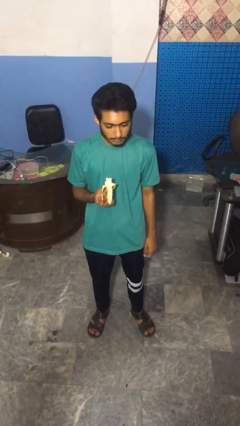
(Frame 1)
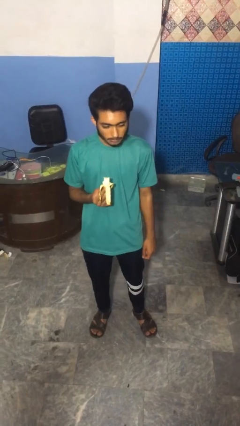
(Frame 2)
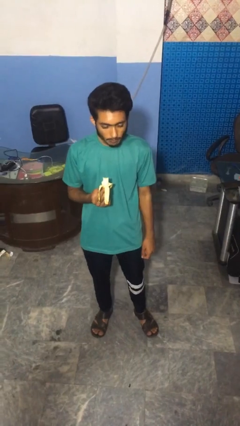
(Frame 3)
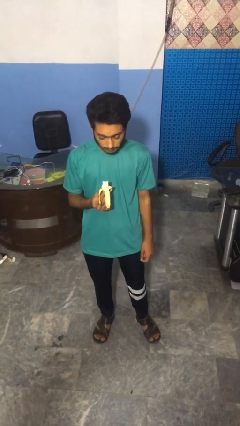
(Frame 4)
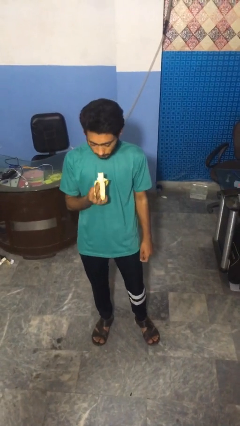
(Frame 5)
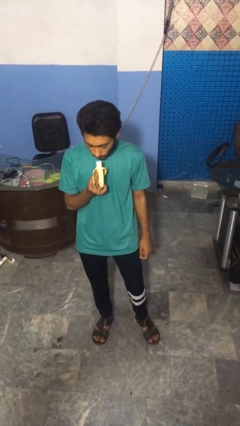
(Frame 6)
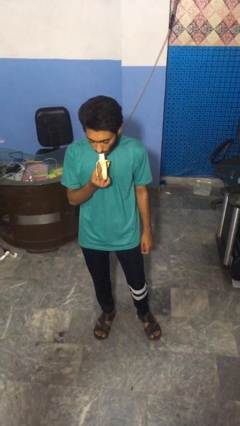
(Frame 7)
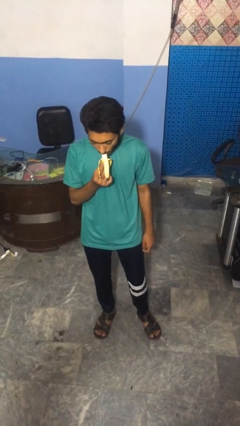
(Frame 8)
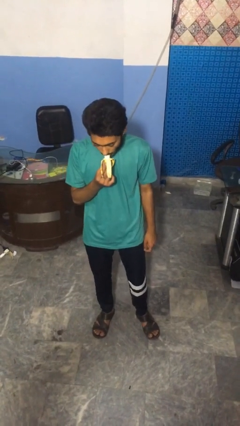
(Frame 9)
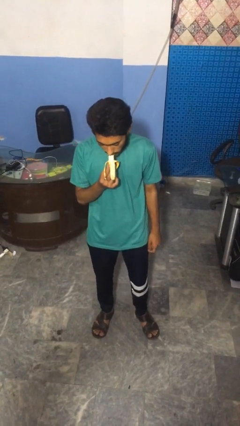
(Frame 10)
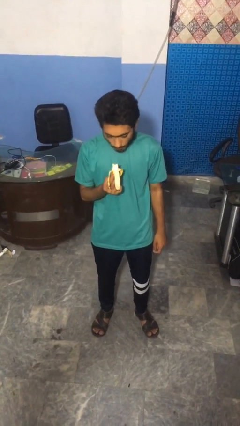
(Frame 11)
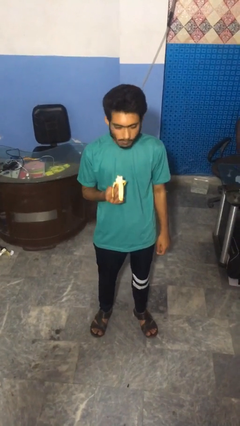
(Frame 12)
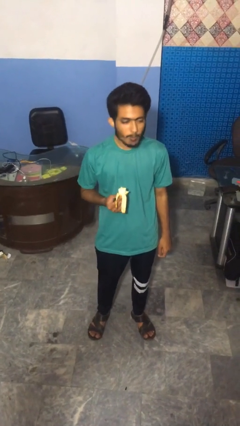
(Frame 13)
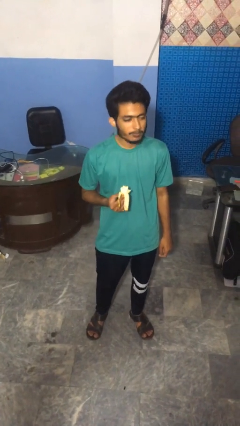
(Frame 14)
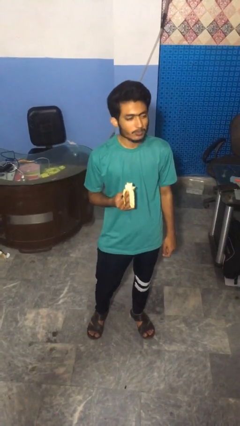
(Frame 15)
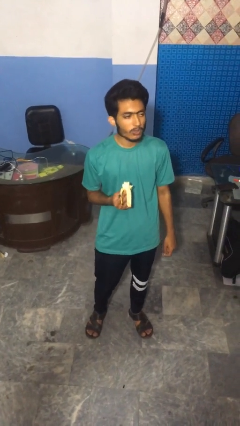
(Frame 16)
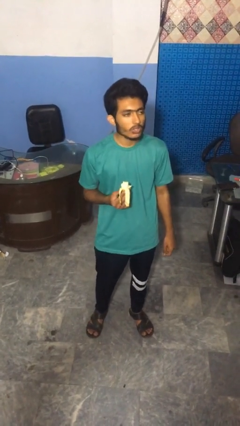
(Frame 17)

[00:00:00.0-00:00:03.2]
person eats banana

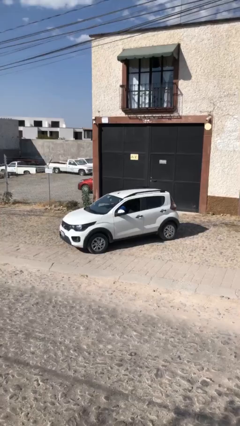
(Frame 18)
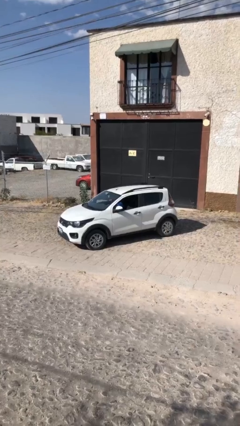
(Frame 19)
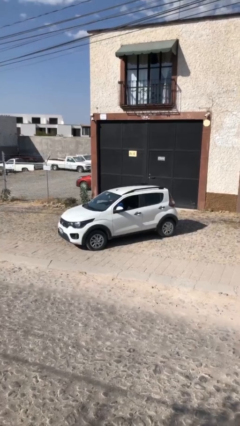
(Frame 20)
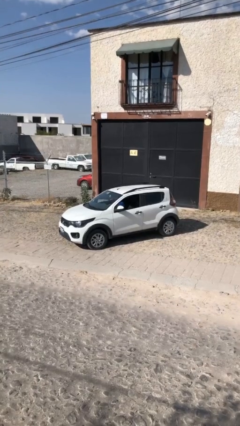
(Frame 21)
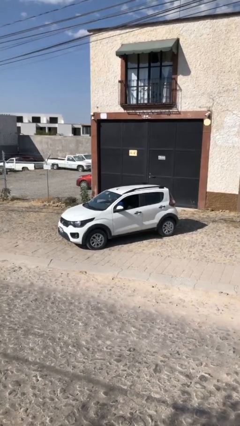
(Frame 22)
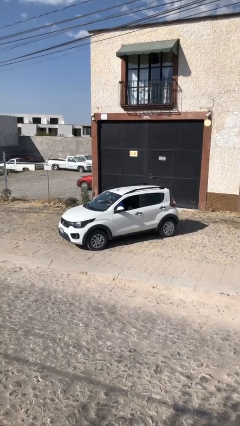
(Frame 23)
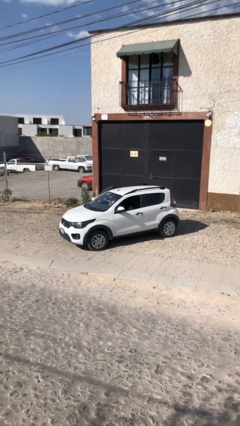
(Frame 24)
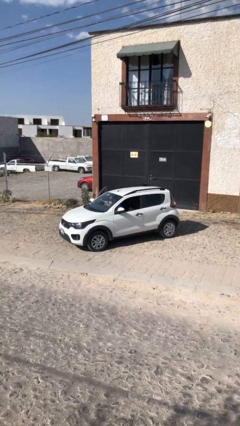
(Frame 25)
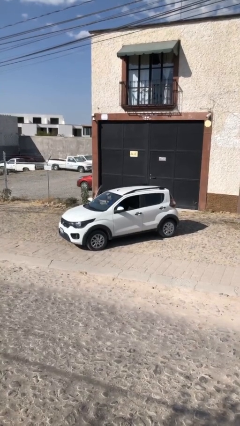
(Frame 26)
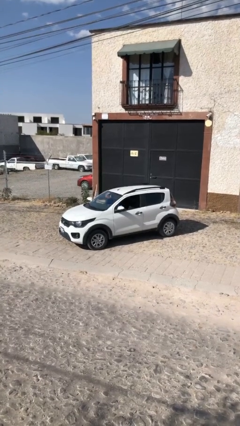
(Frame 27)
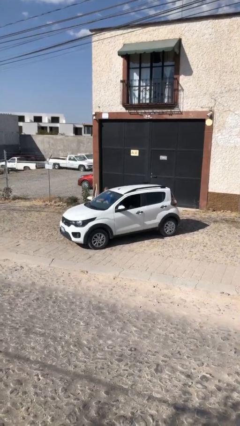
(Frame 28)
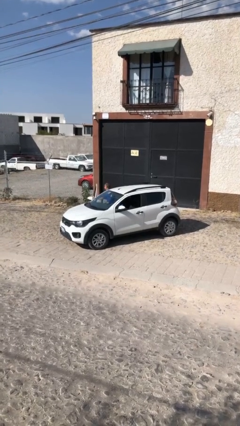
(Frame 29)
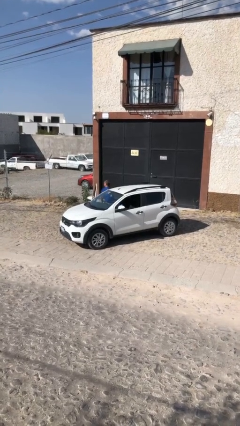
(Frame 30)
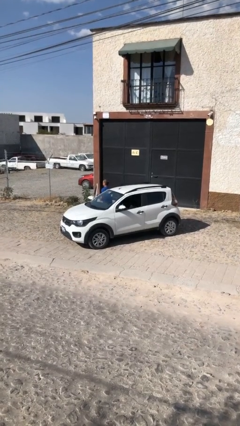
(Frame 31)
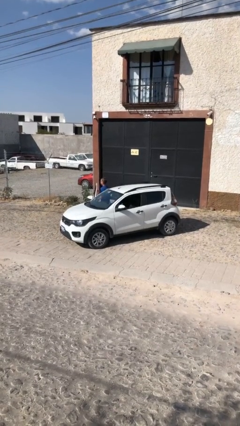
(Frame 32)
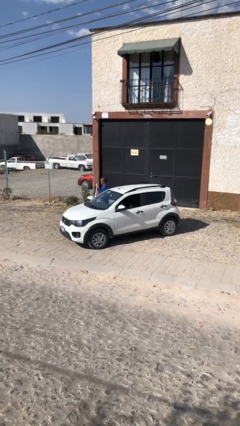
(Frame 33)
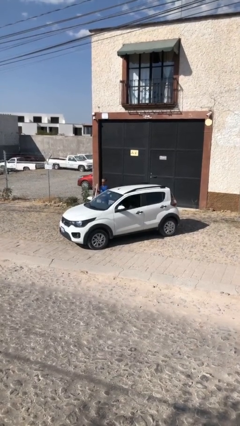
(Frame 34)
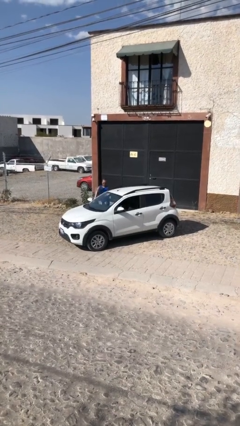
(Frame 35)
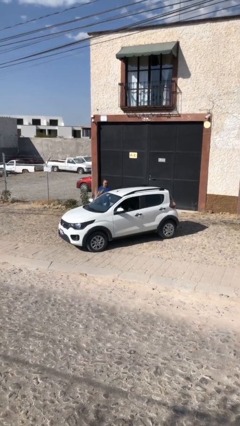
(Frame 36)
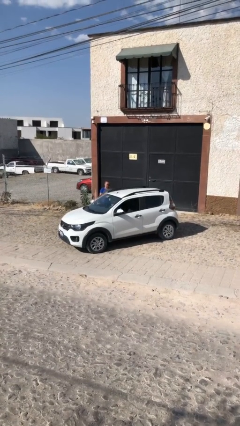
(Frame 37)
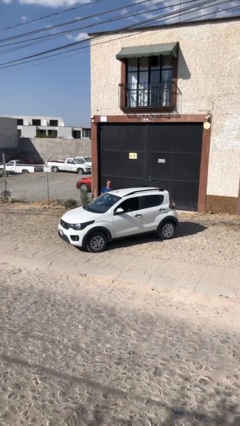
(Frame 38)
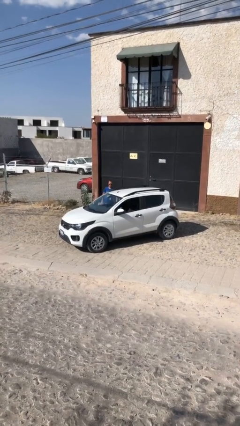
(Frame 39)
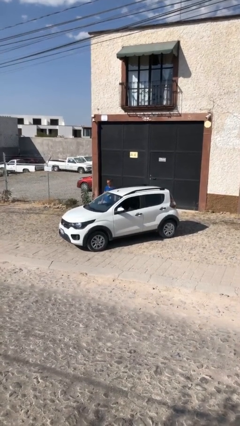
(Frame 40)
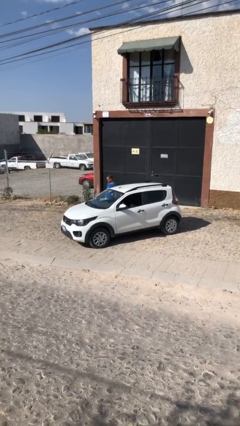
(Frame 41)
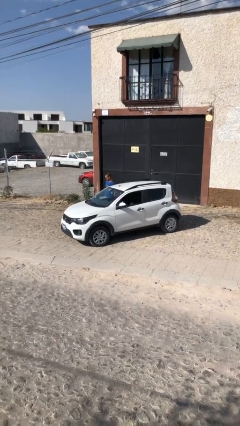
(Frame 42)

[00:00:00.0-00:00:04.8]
car drops off person

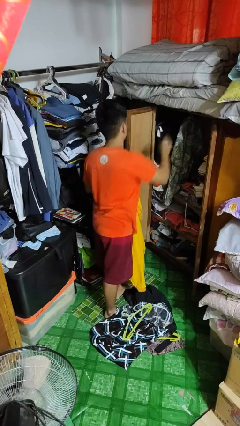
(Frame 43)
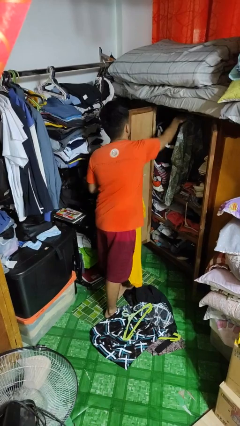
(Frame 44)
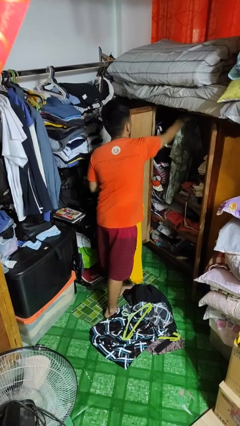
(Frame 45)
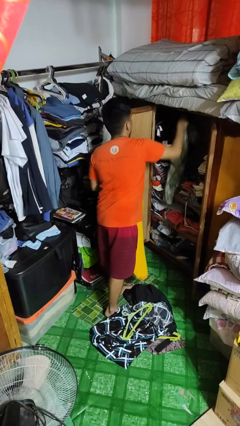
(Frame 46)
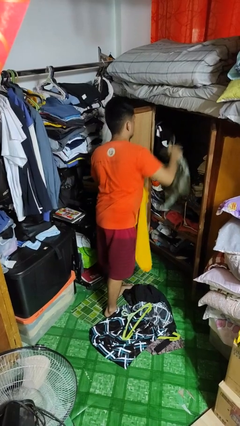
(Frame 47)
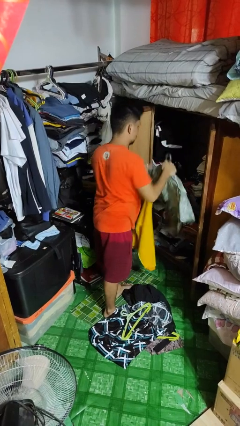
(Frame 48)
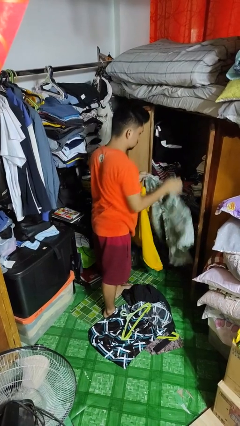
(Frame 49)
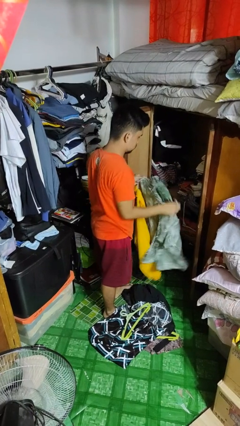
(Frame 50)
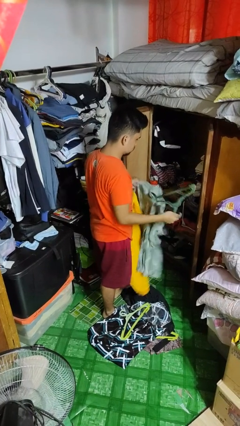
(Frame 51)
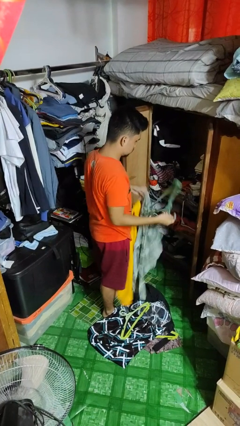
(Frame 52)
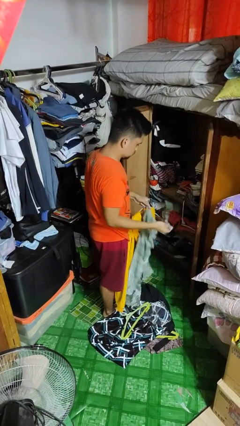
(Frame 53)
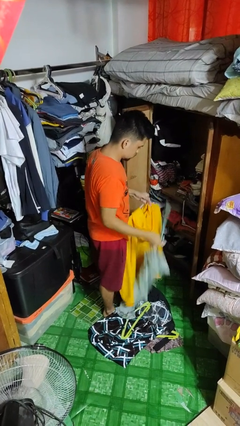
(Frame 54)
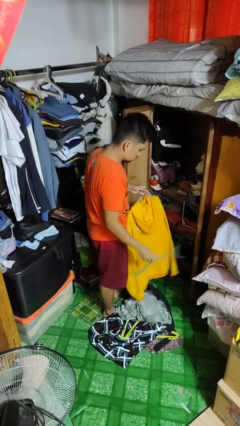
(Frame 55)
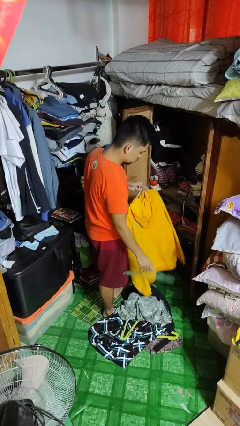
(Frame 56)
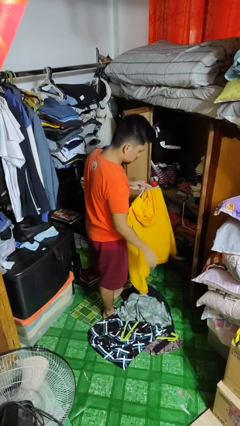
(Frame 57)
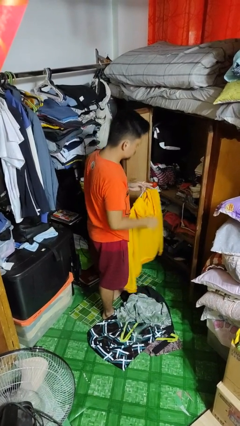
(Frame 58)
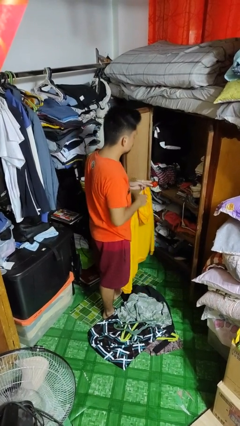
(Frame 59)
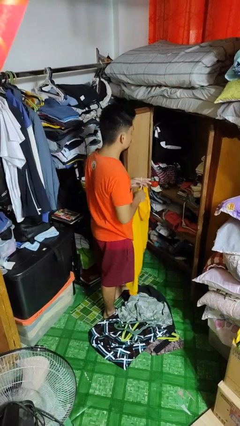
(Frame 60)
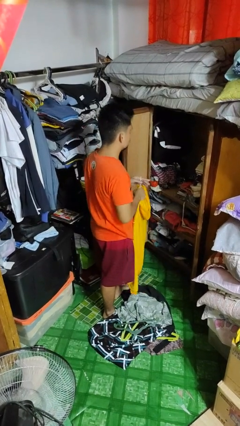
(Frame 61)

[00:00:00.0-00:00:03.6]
person takes clothes from closet

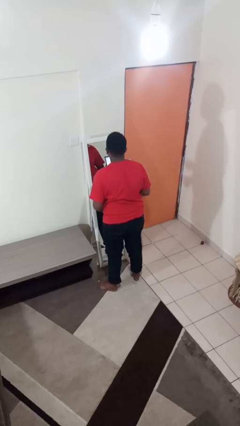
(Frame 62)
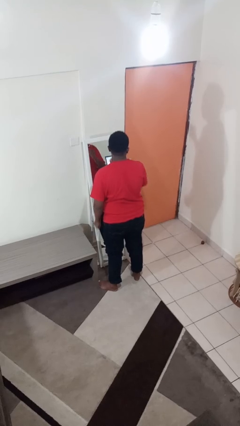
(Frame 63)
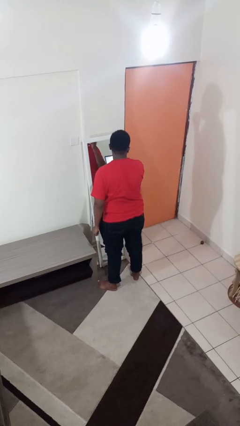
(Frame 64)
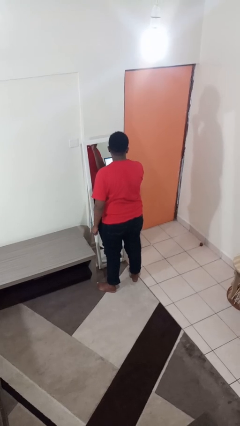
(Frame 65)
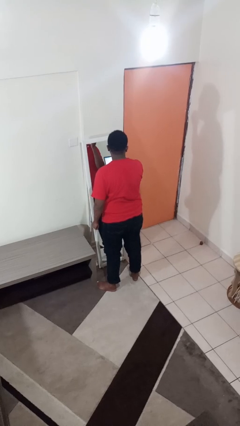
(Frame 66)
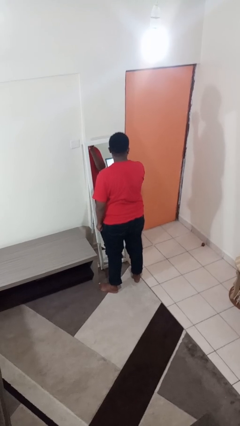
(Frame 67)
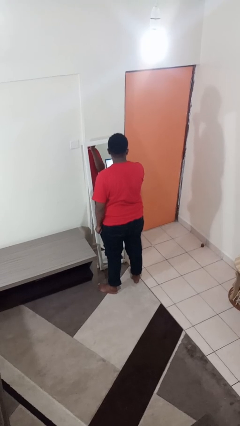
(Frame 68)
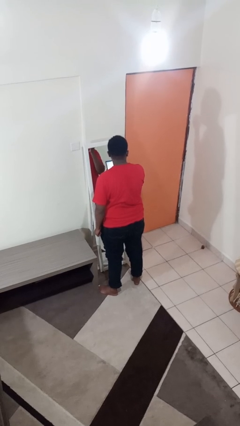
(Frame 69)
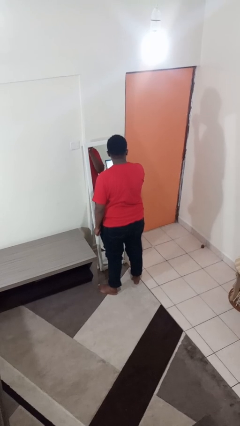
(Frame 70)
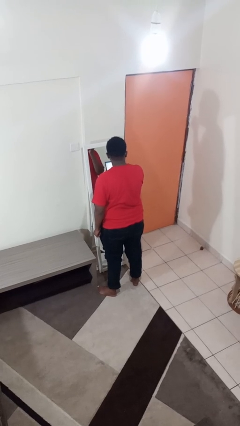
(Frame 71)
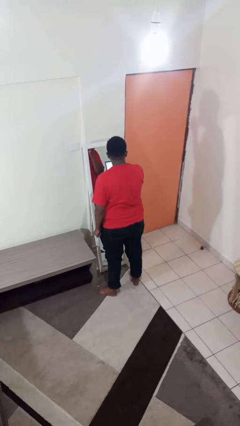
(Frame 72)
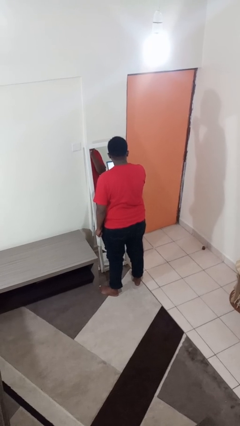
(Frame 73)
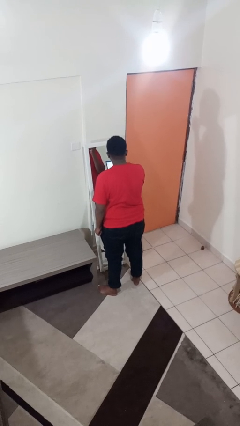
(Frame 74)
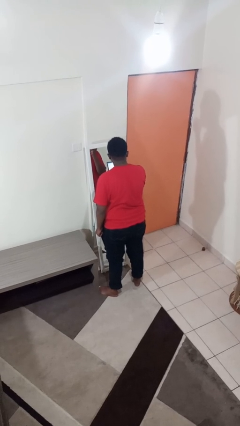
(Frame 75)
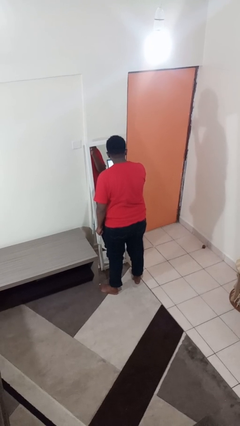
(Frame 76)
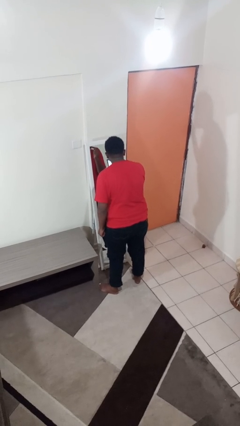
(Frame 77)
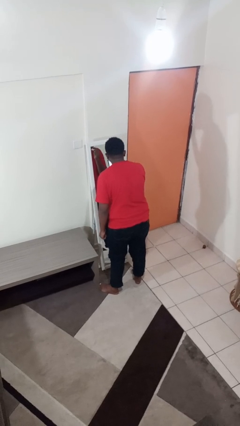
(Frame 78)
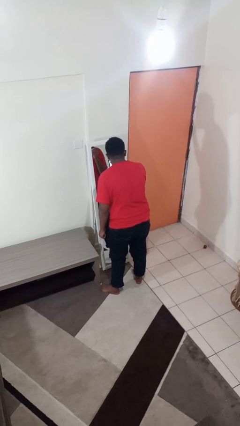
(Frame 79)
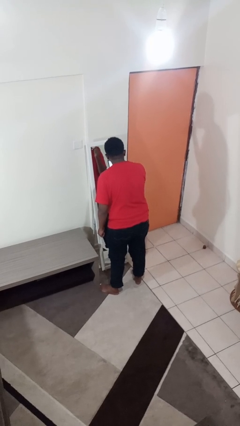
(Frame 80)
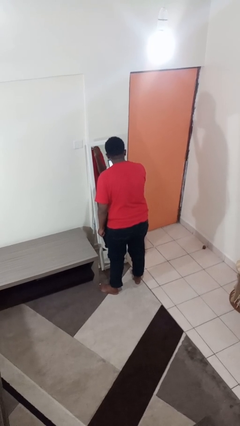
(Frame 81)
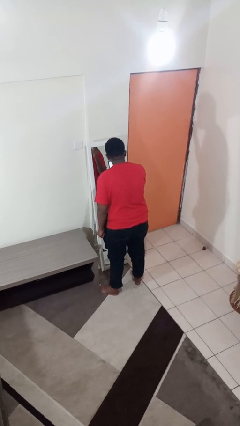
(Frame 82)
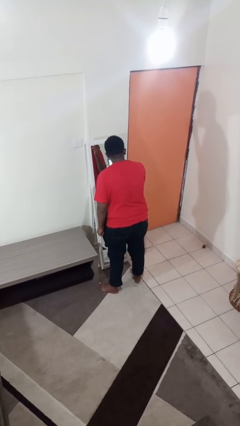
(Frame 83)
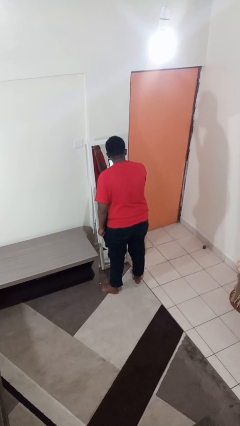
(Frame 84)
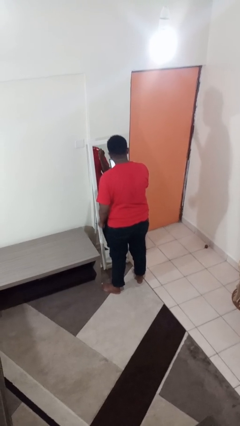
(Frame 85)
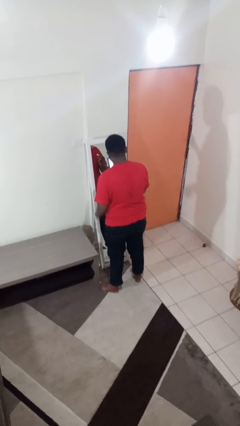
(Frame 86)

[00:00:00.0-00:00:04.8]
person applies lip makeup

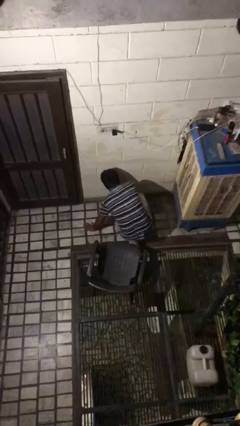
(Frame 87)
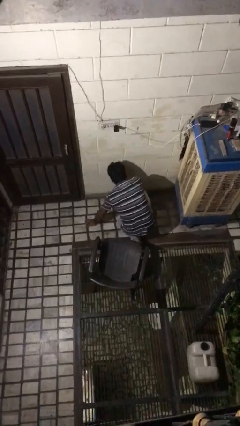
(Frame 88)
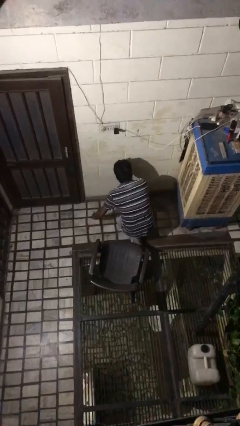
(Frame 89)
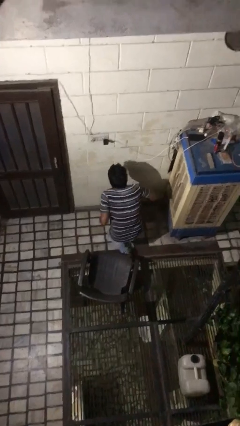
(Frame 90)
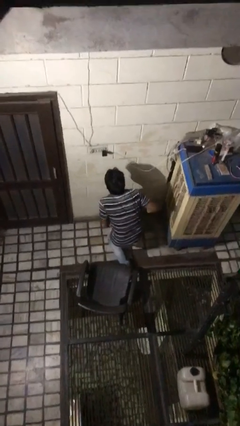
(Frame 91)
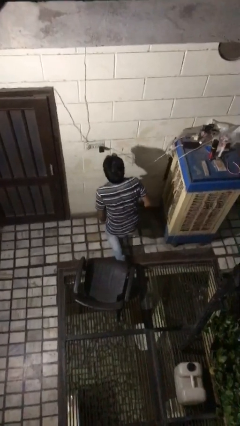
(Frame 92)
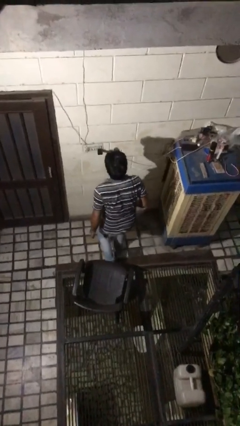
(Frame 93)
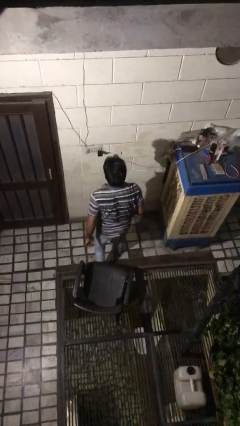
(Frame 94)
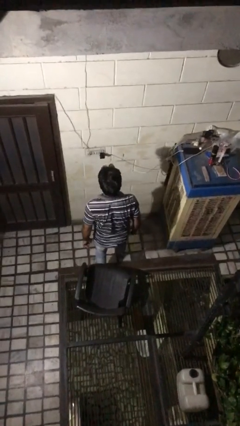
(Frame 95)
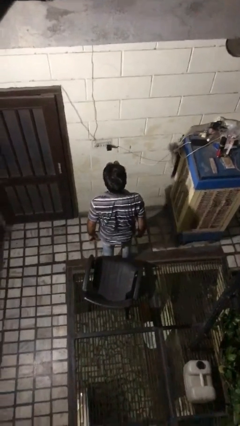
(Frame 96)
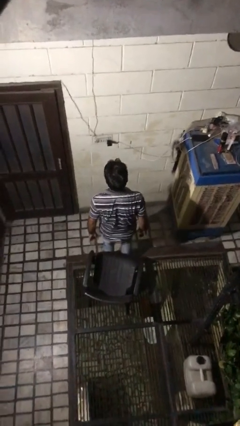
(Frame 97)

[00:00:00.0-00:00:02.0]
person stands up from floor
